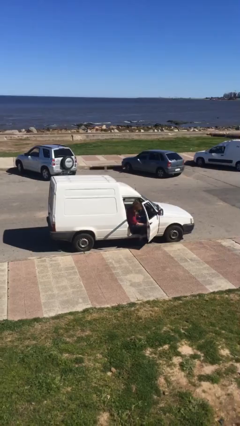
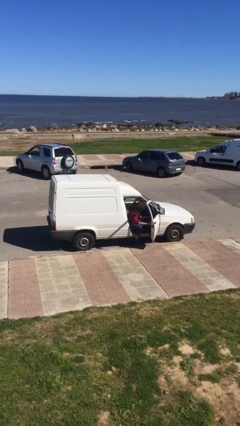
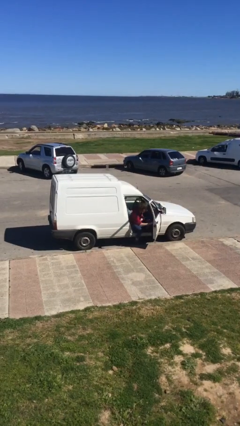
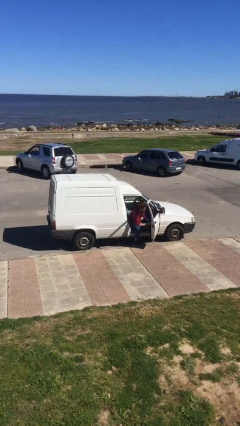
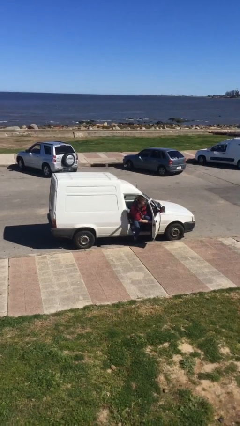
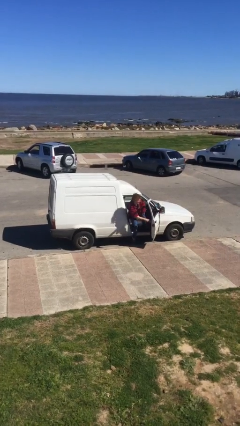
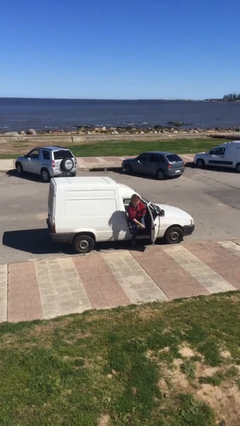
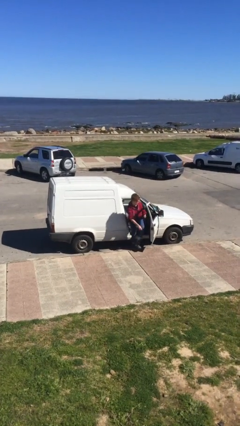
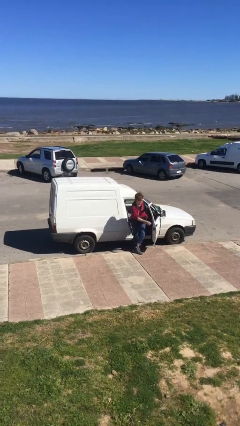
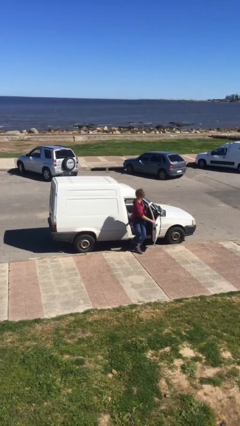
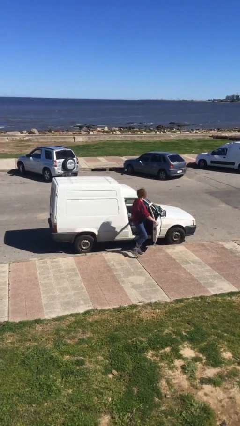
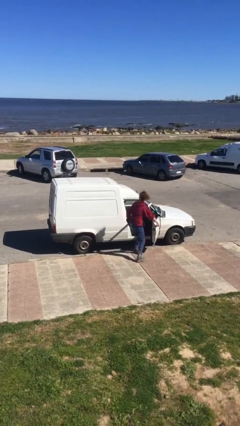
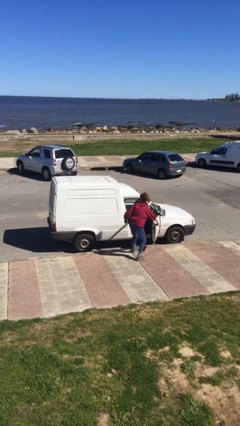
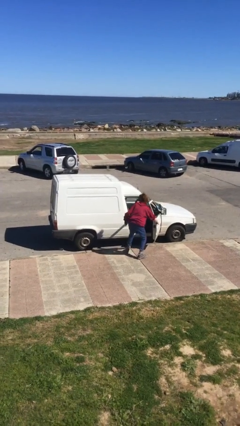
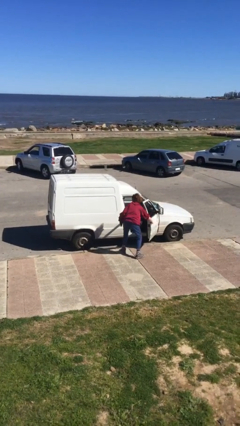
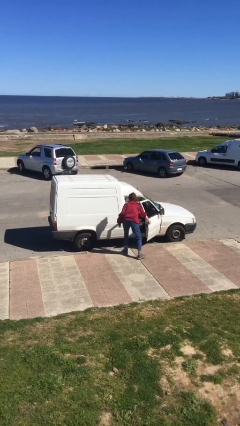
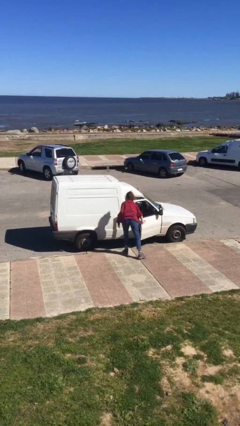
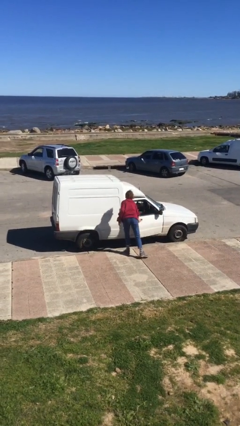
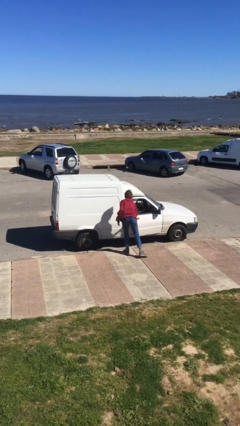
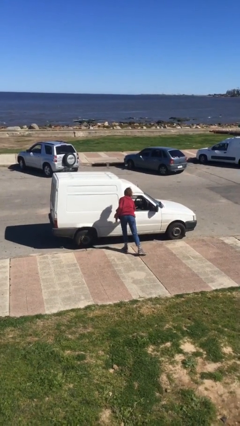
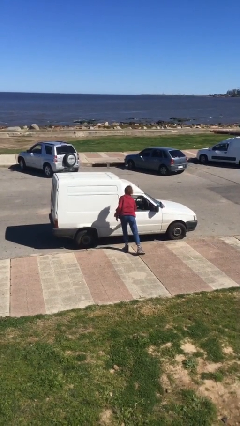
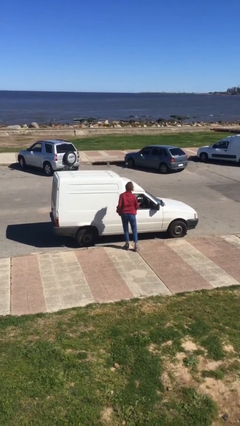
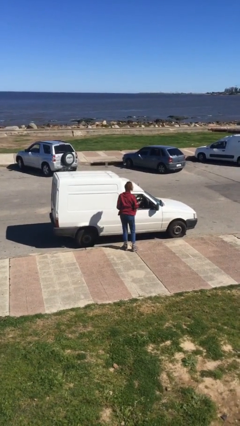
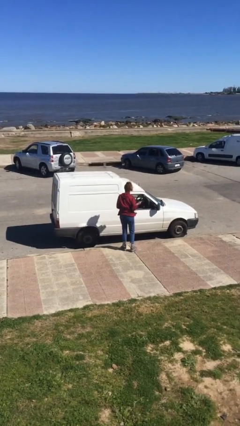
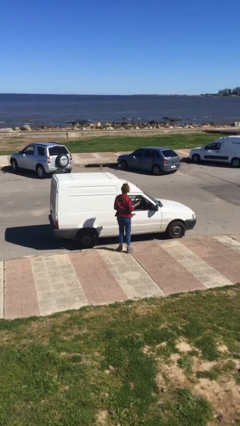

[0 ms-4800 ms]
car drops off person

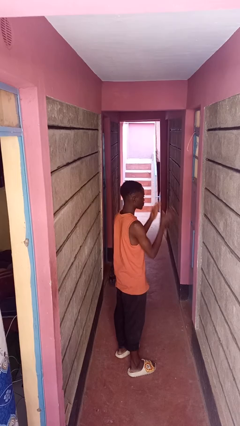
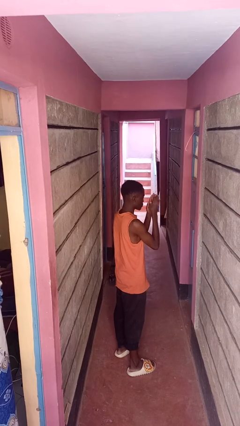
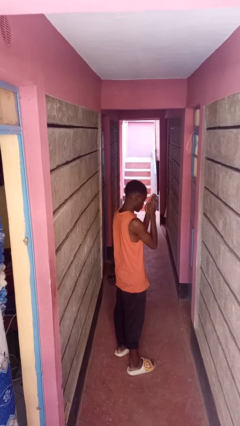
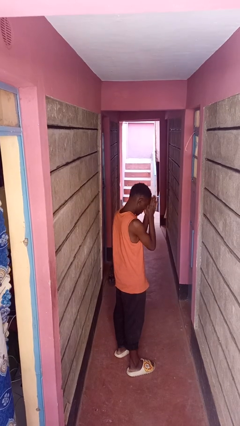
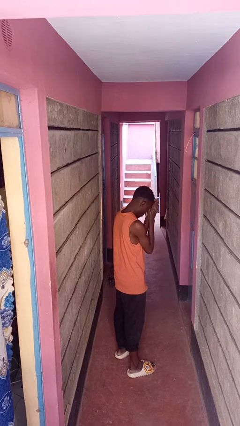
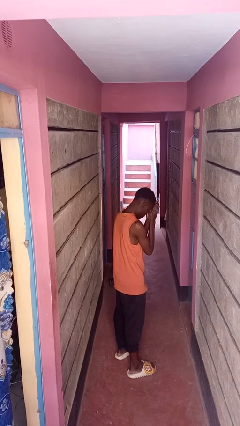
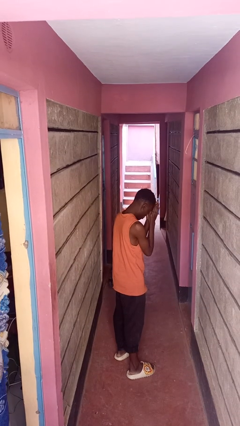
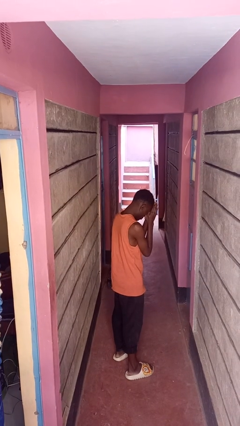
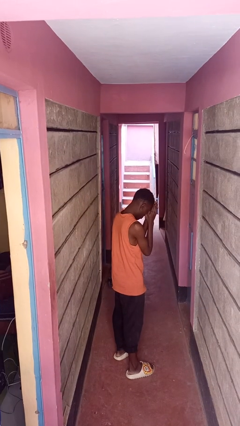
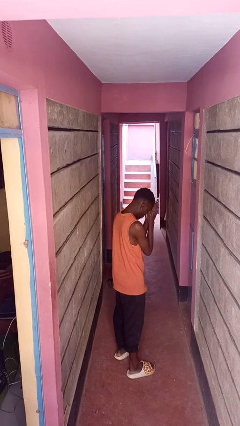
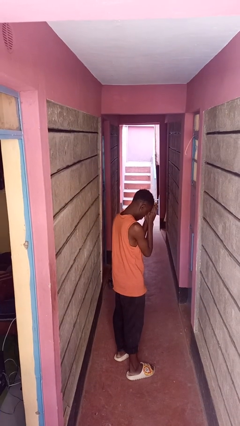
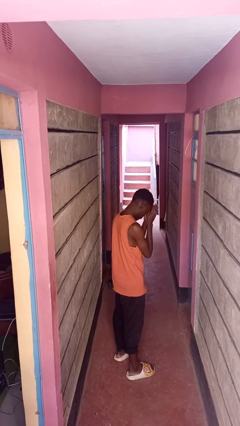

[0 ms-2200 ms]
person prays

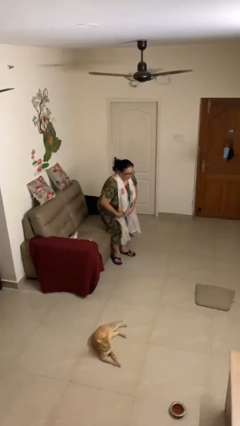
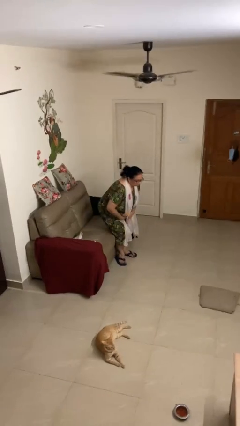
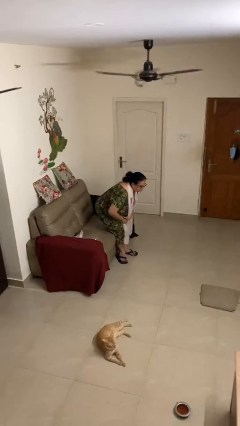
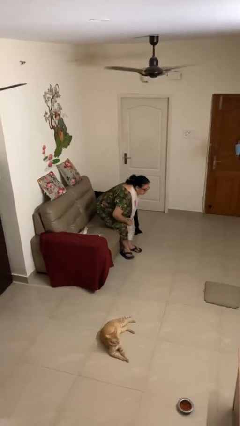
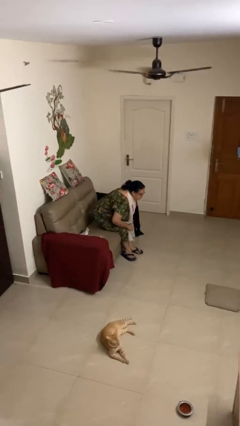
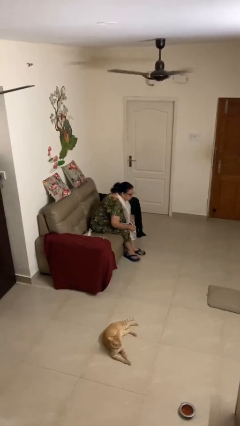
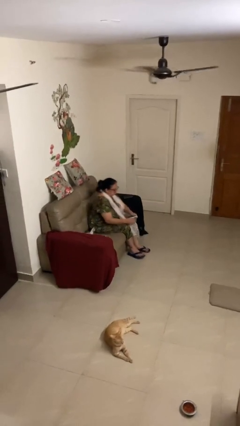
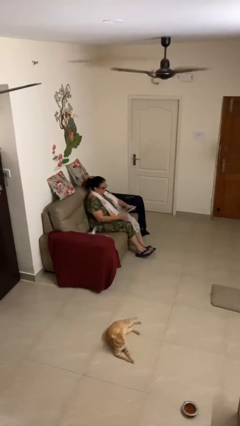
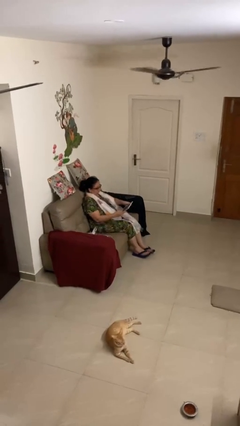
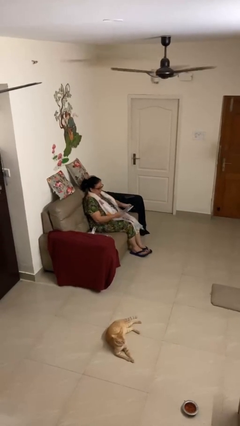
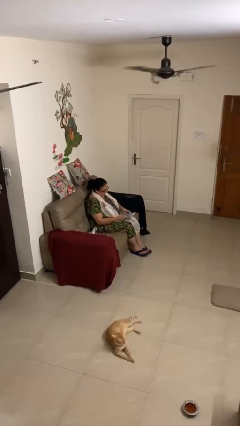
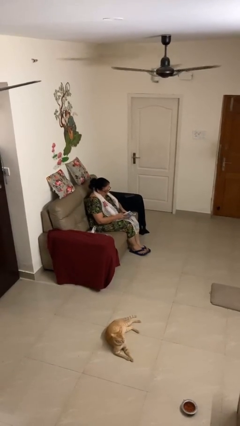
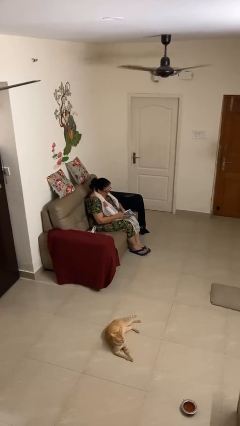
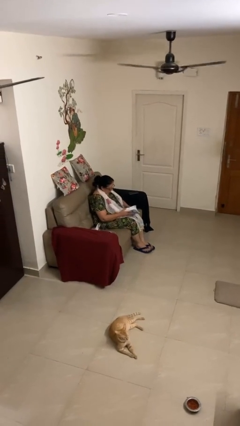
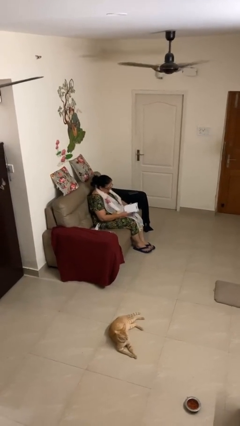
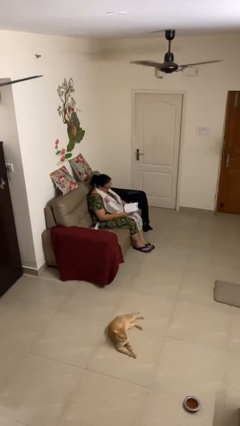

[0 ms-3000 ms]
person sits down

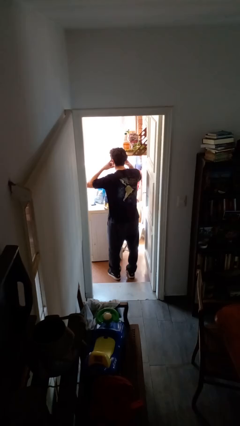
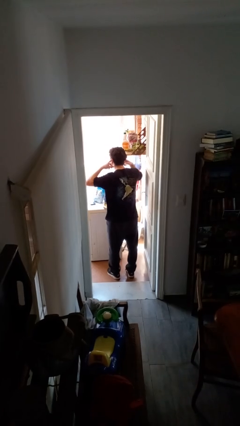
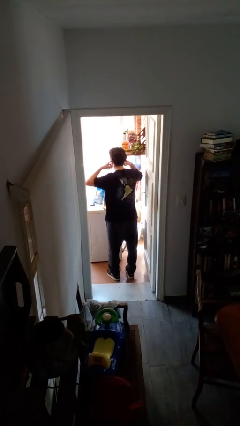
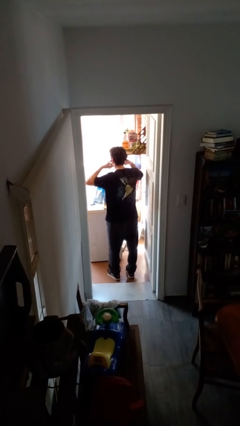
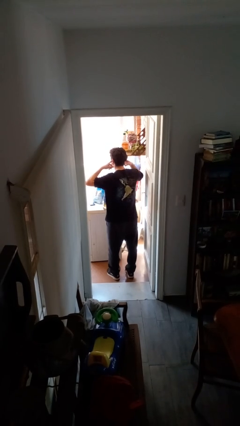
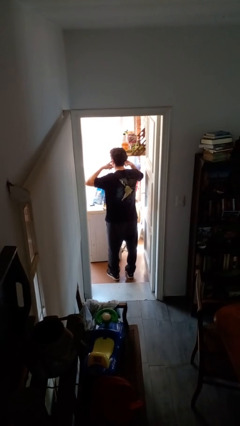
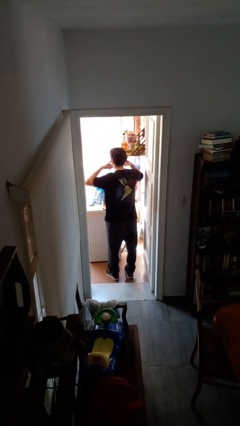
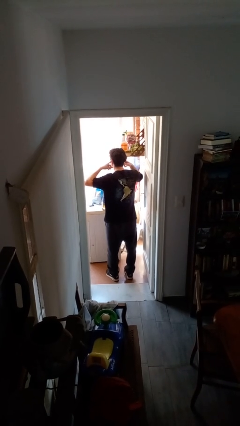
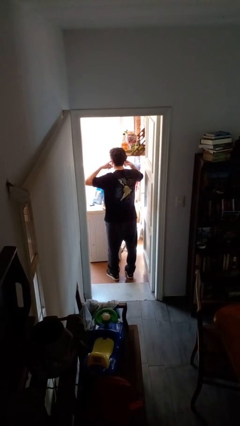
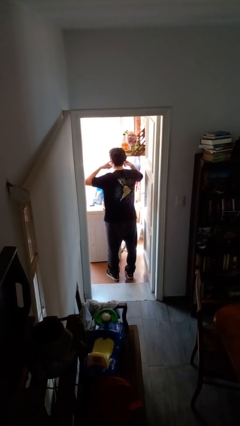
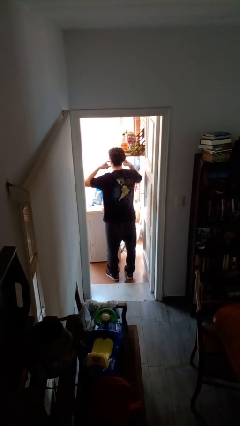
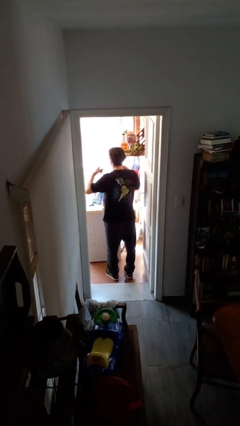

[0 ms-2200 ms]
person puts fingers in ear

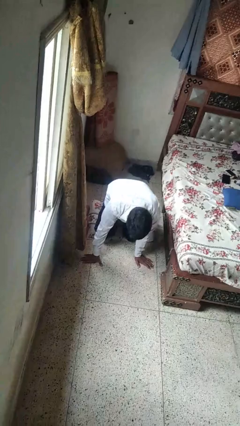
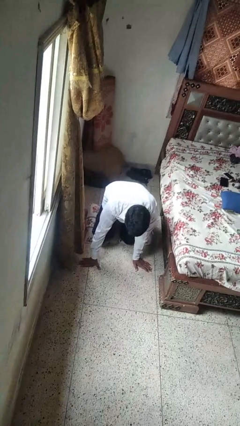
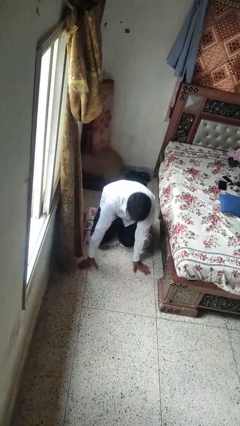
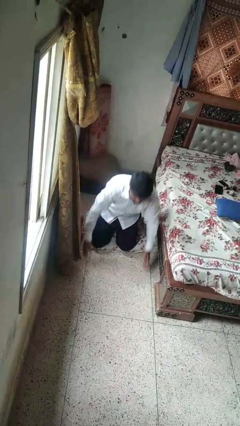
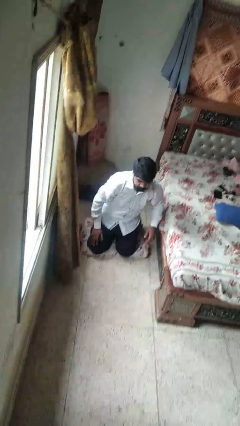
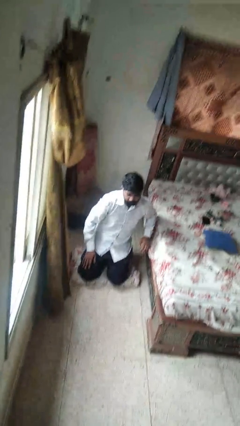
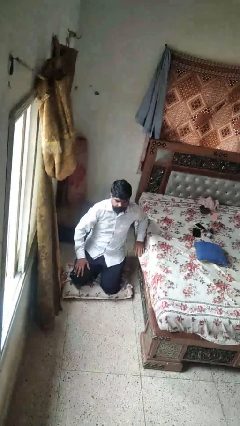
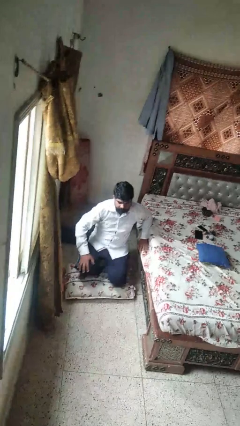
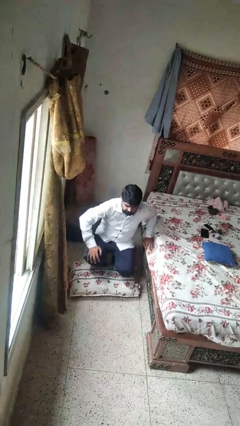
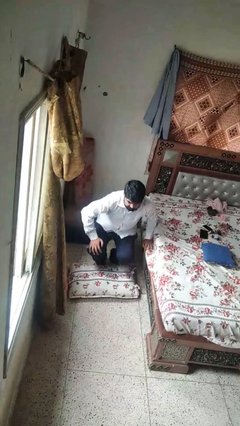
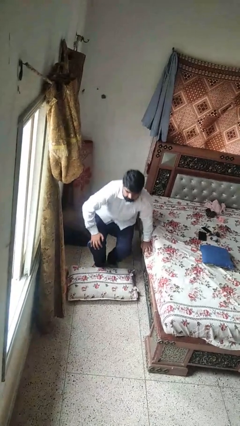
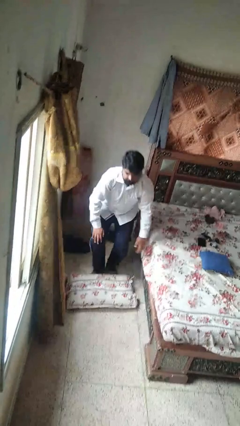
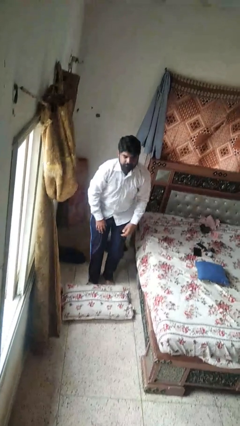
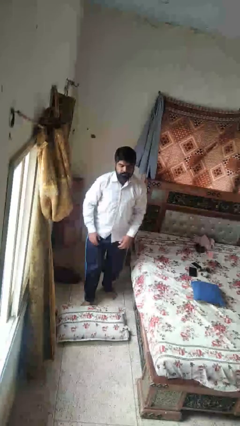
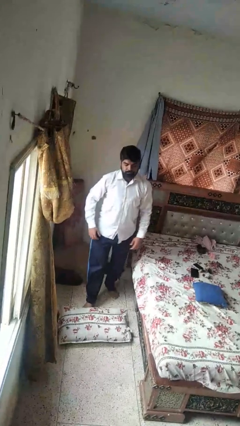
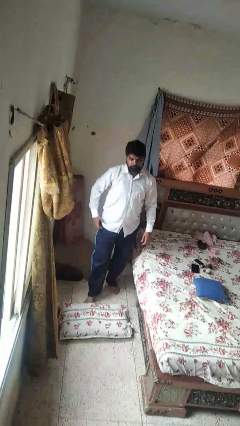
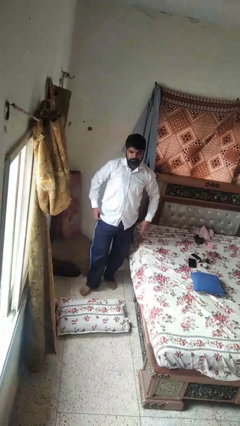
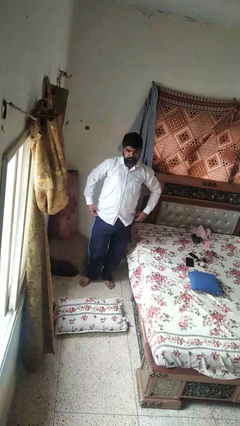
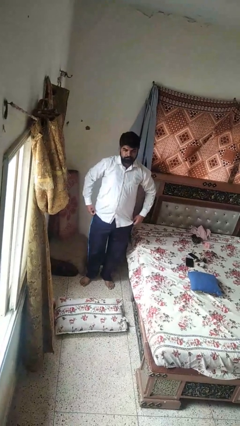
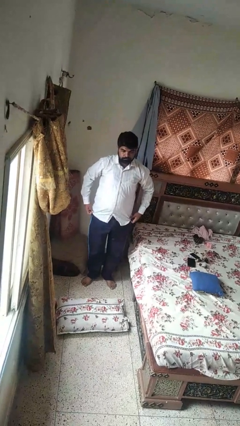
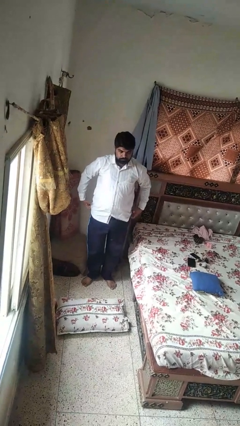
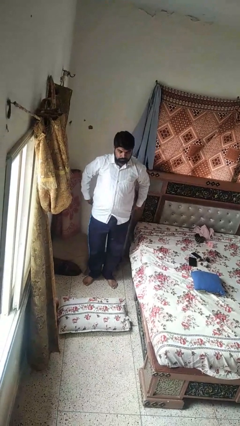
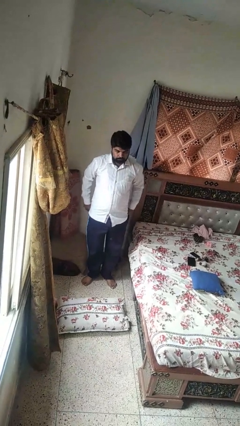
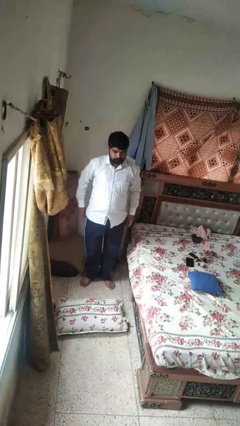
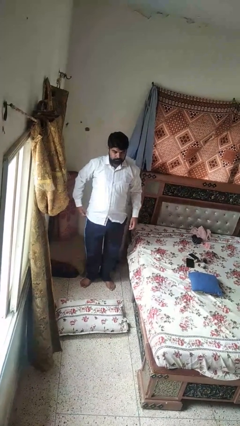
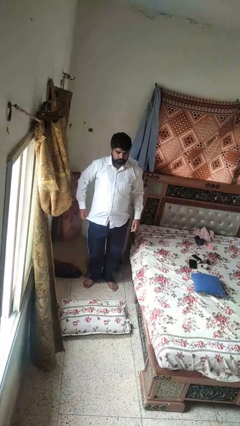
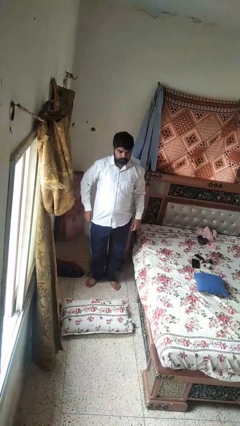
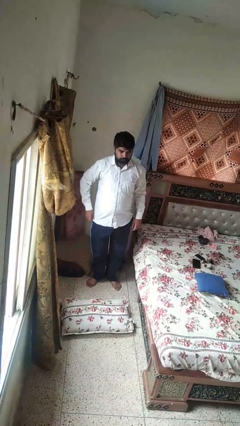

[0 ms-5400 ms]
person stands up from floor
